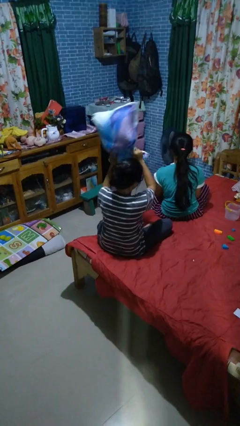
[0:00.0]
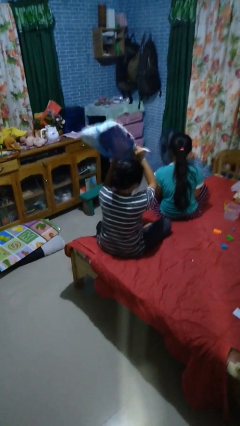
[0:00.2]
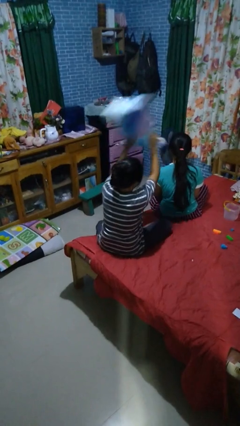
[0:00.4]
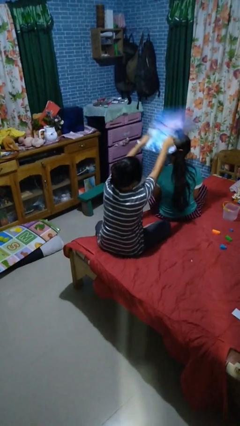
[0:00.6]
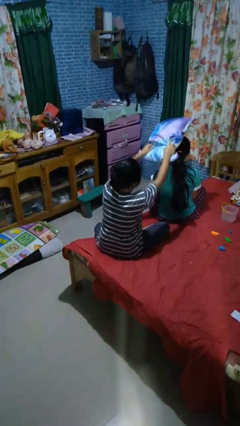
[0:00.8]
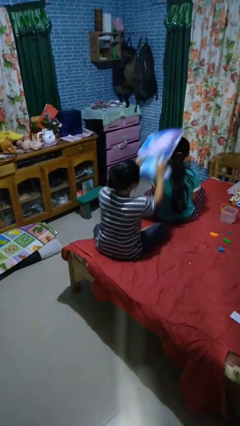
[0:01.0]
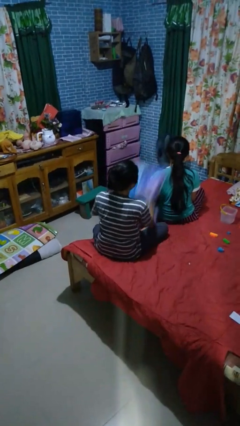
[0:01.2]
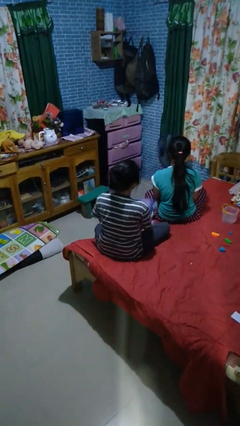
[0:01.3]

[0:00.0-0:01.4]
person hits person with pillow

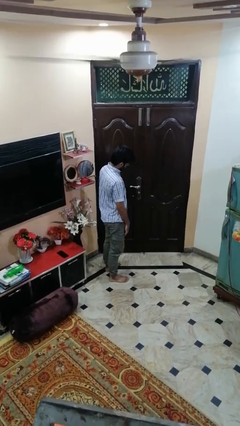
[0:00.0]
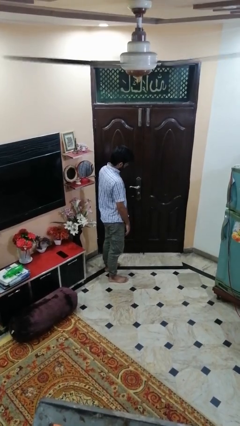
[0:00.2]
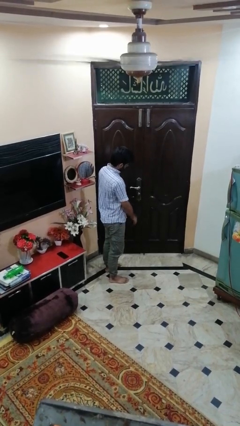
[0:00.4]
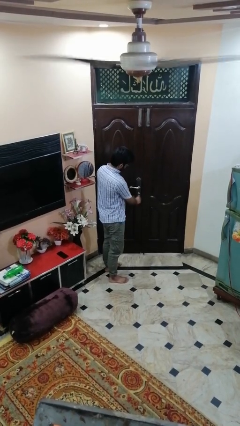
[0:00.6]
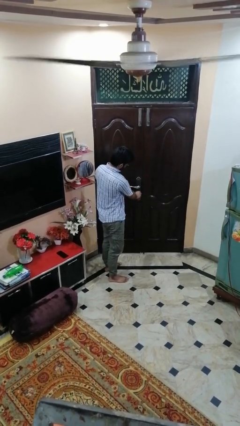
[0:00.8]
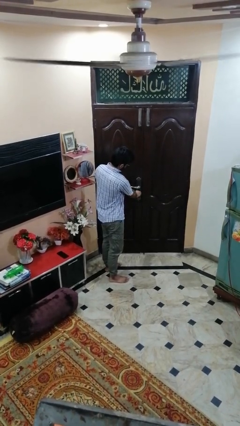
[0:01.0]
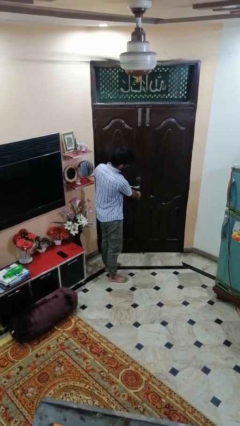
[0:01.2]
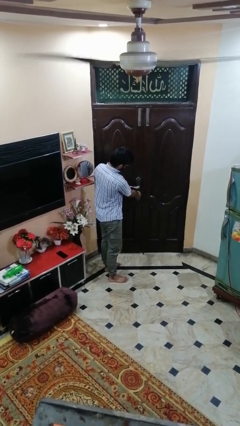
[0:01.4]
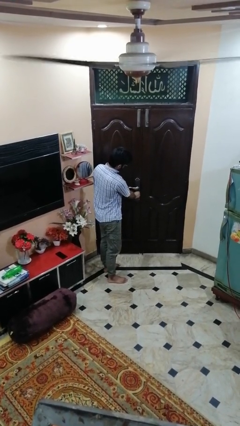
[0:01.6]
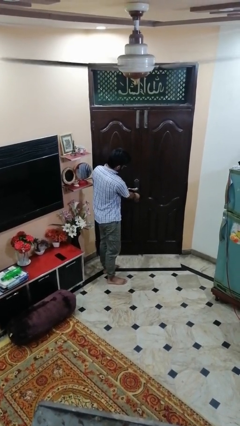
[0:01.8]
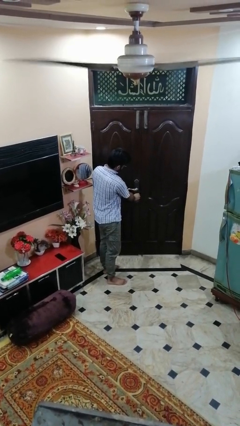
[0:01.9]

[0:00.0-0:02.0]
person locks door with keys

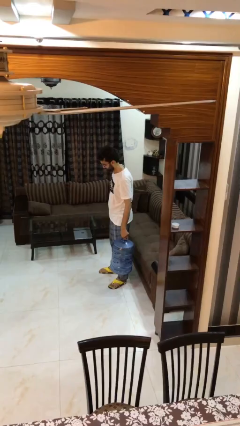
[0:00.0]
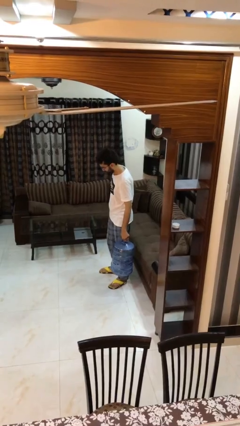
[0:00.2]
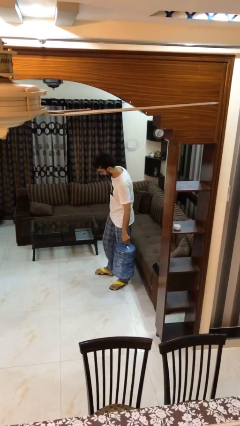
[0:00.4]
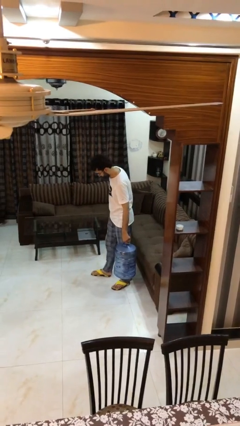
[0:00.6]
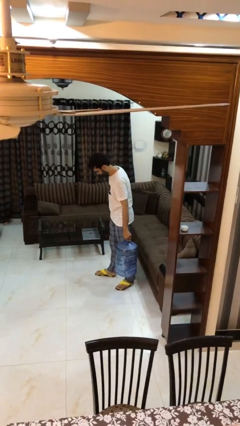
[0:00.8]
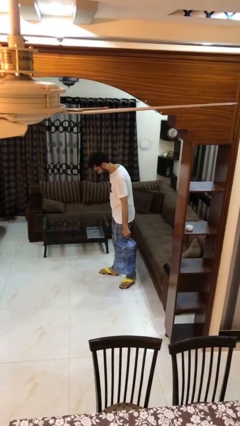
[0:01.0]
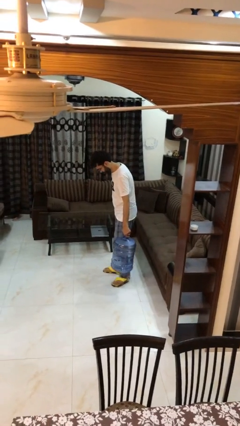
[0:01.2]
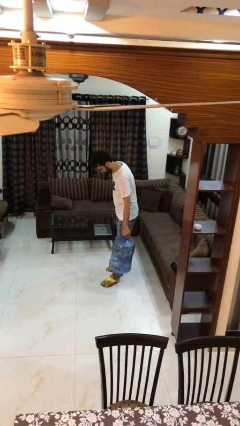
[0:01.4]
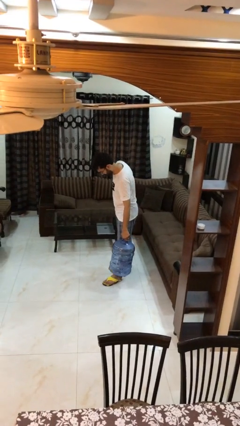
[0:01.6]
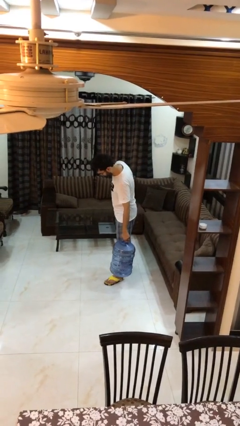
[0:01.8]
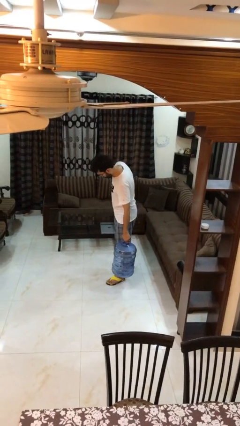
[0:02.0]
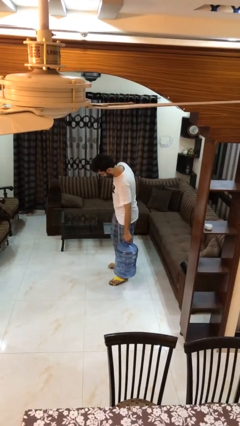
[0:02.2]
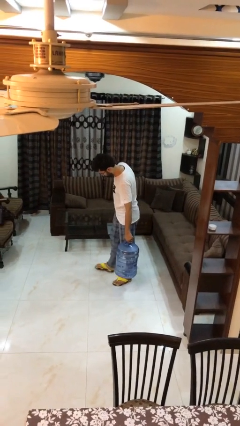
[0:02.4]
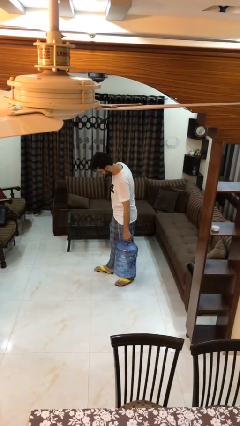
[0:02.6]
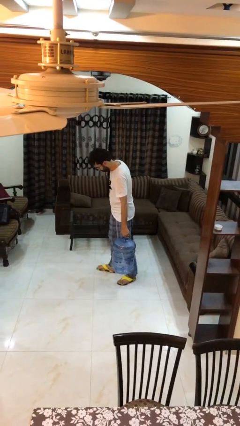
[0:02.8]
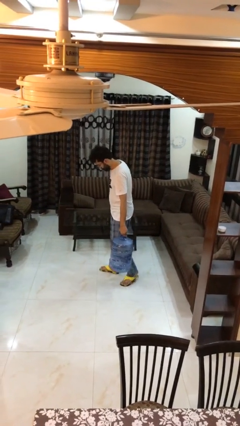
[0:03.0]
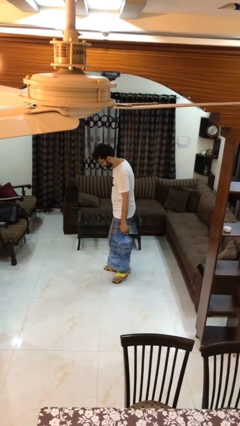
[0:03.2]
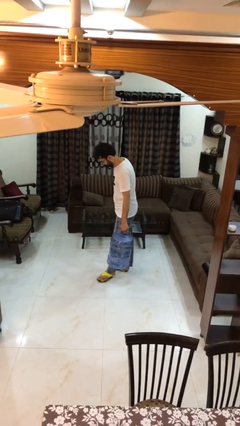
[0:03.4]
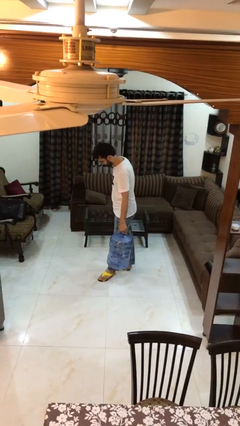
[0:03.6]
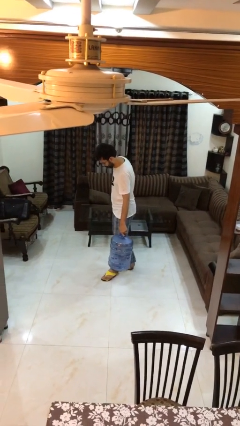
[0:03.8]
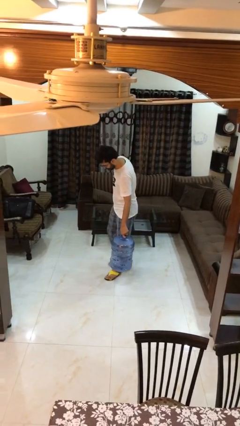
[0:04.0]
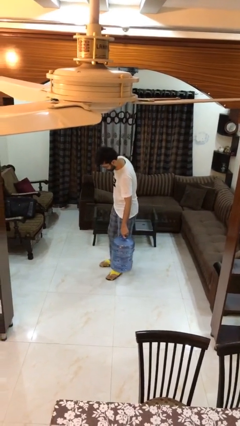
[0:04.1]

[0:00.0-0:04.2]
person carries heavy object

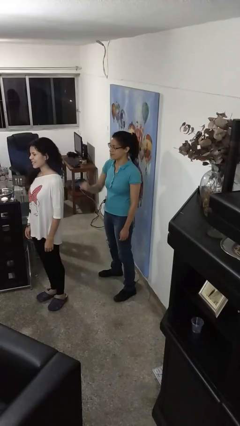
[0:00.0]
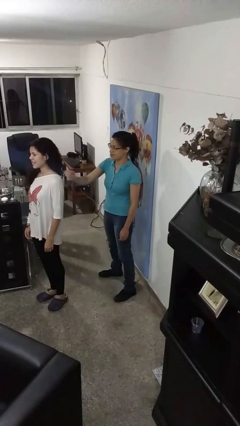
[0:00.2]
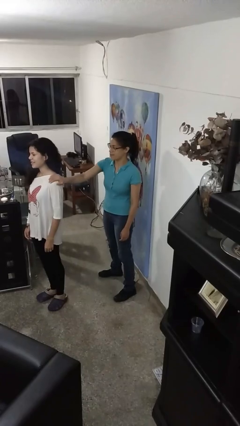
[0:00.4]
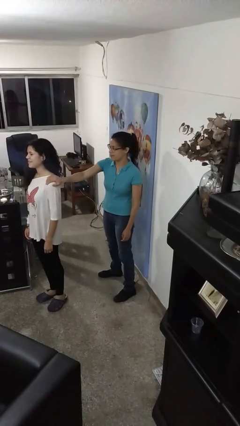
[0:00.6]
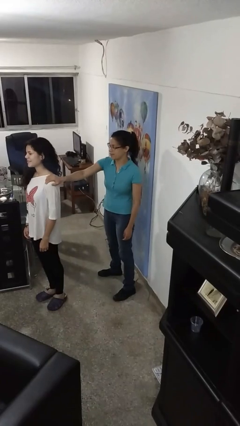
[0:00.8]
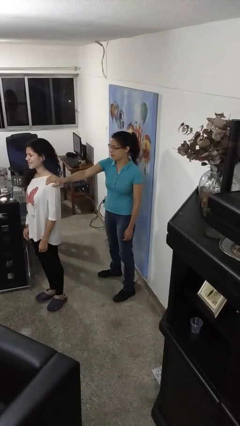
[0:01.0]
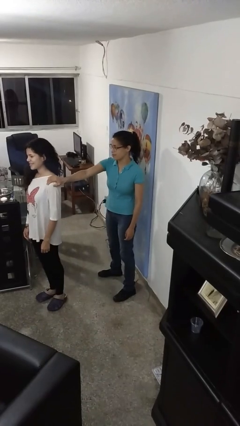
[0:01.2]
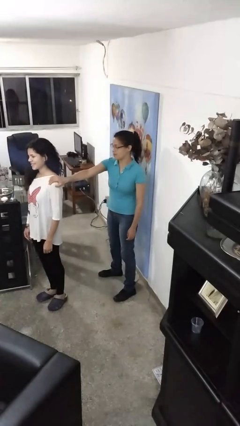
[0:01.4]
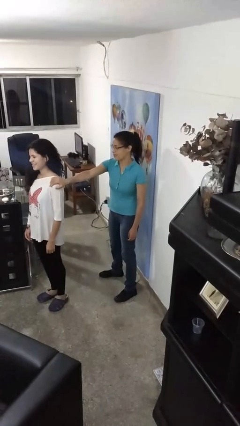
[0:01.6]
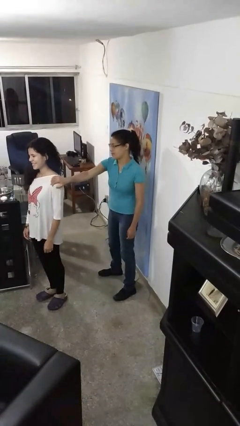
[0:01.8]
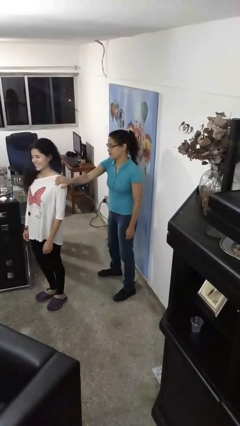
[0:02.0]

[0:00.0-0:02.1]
person grabs person by shoulder

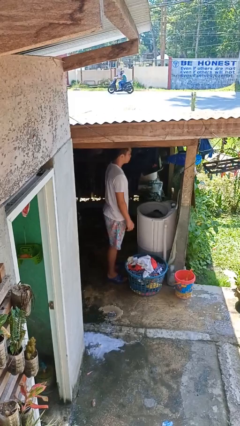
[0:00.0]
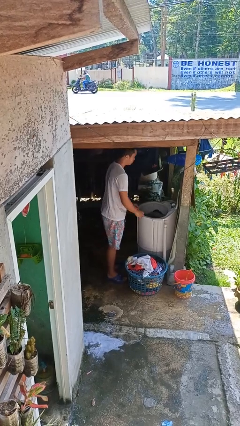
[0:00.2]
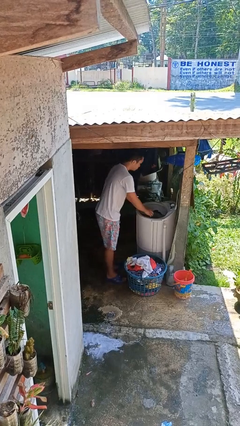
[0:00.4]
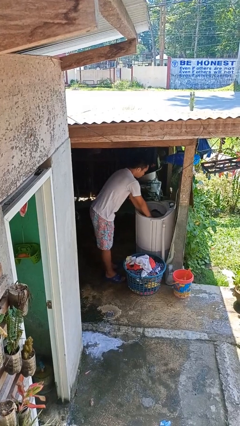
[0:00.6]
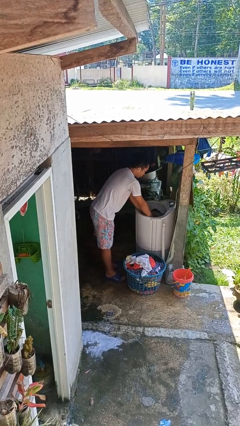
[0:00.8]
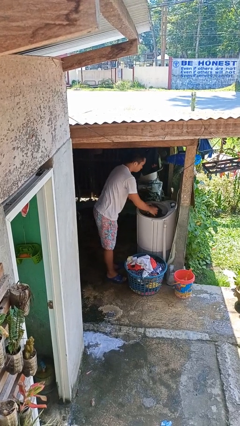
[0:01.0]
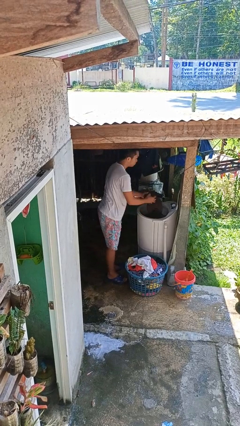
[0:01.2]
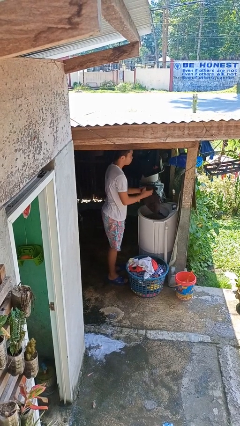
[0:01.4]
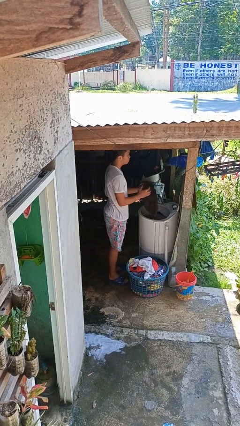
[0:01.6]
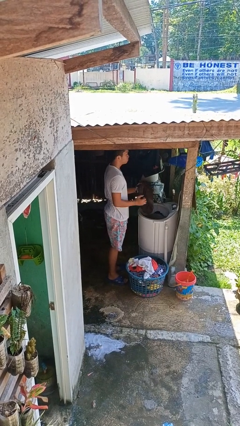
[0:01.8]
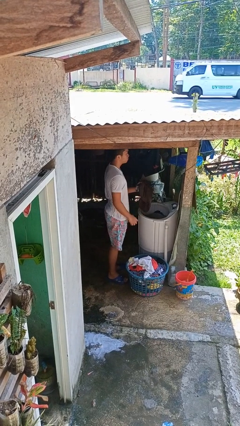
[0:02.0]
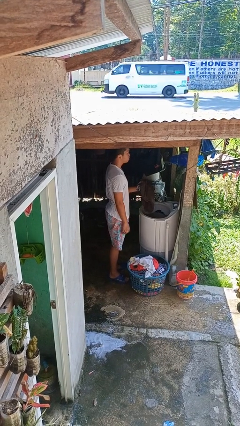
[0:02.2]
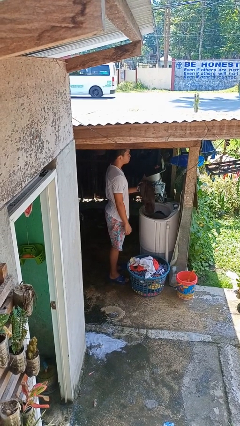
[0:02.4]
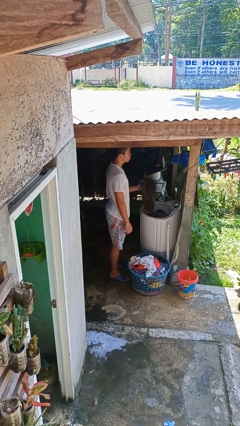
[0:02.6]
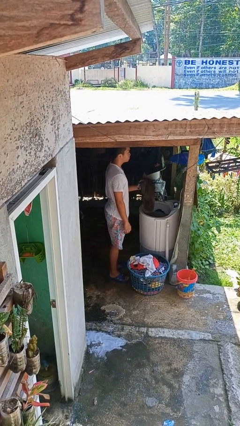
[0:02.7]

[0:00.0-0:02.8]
person unloads clotheswasher

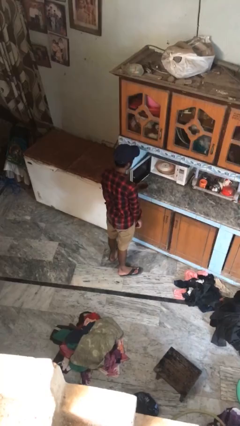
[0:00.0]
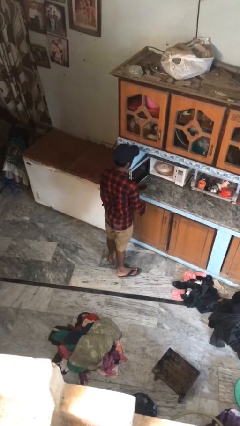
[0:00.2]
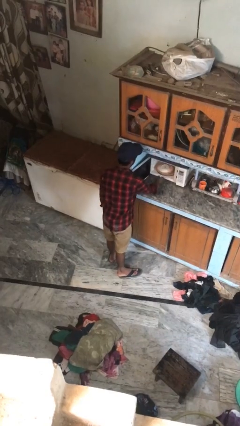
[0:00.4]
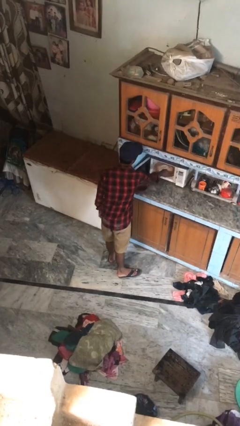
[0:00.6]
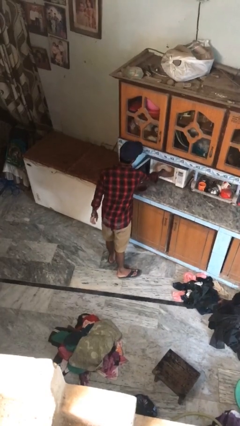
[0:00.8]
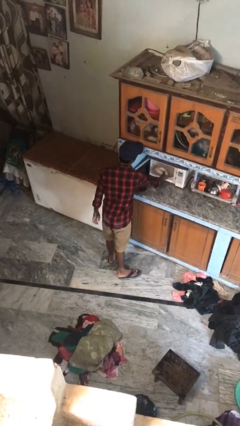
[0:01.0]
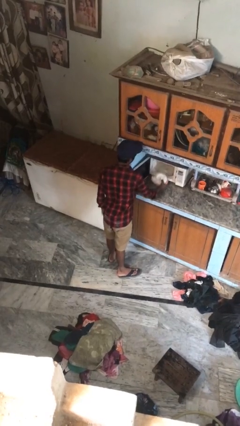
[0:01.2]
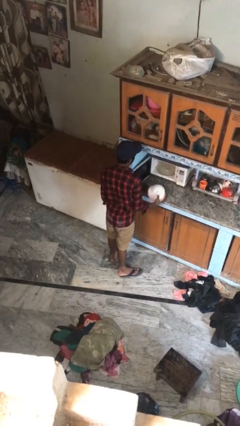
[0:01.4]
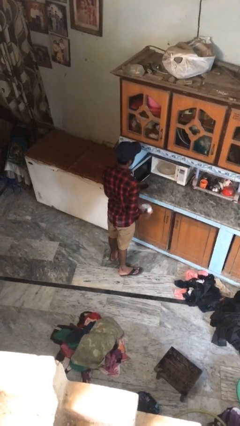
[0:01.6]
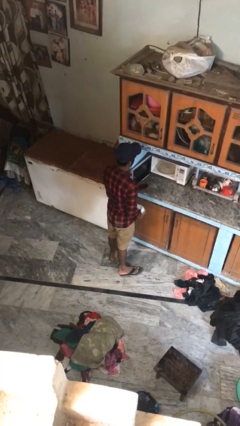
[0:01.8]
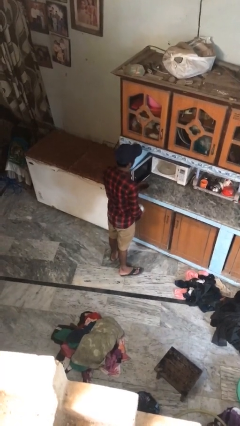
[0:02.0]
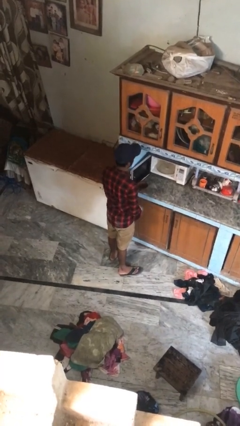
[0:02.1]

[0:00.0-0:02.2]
person takes object from oven

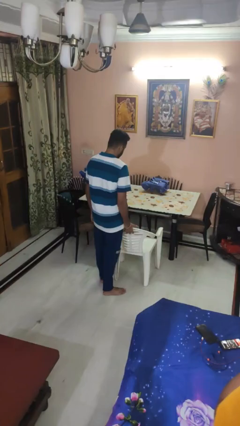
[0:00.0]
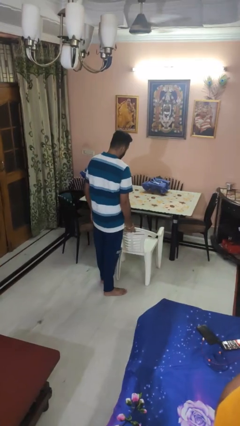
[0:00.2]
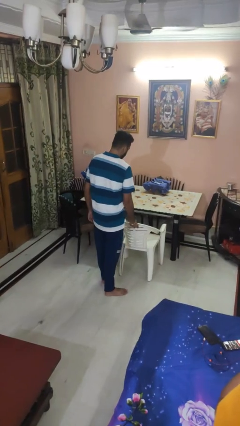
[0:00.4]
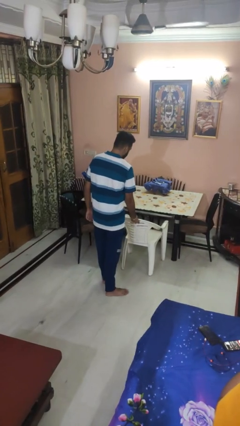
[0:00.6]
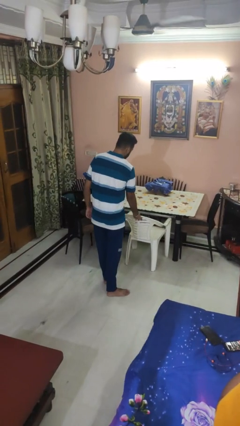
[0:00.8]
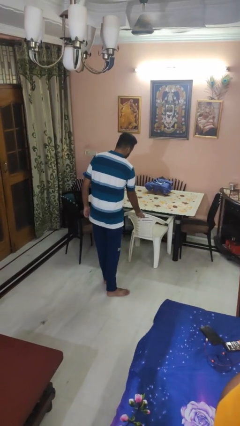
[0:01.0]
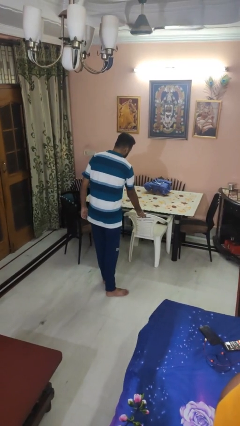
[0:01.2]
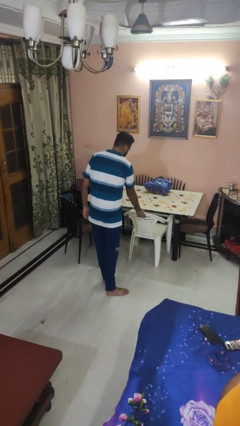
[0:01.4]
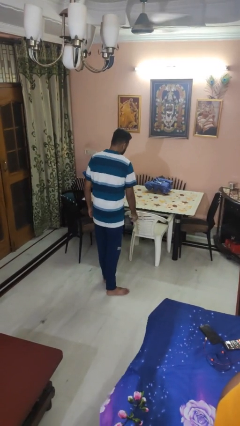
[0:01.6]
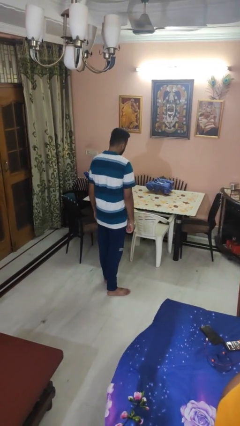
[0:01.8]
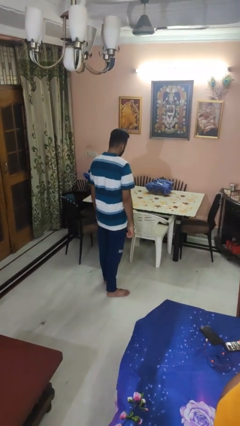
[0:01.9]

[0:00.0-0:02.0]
person pushes in chair

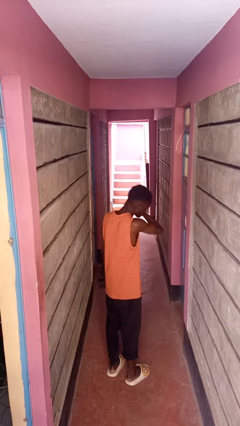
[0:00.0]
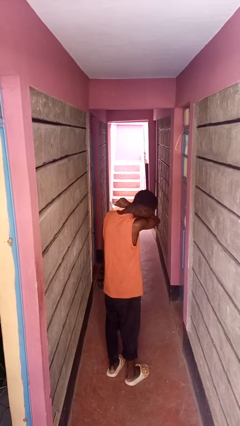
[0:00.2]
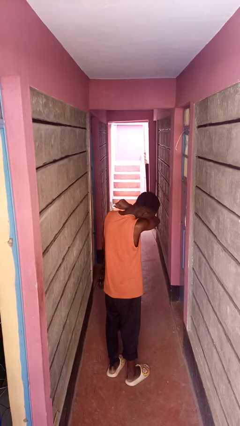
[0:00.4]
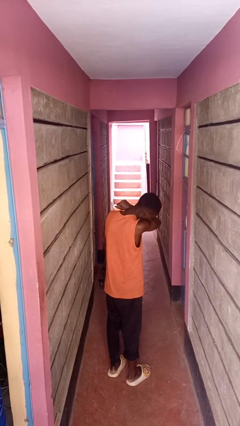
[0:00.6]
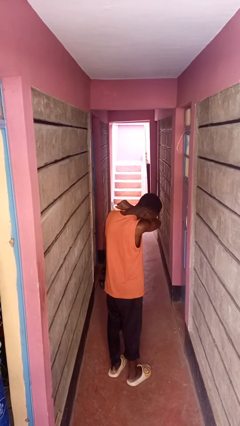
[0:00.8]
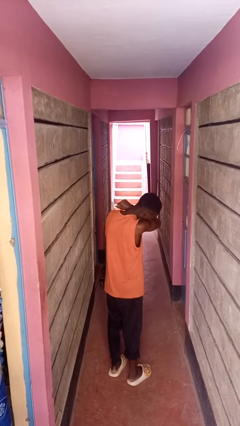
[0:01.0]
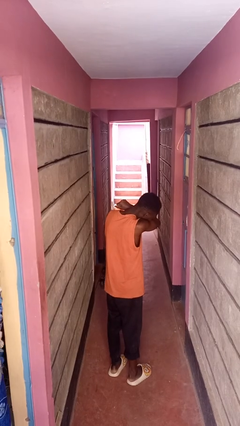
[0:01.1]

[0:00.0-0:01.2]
person sneezes into arm
